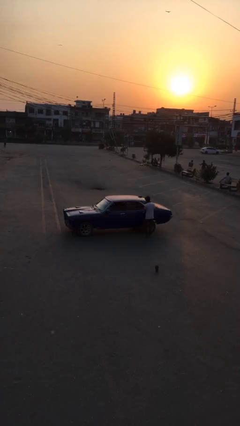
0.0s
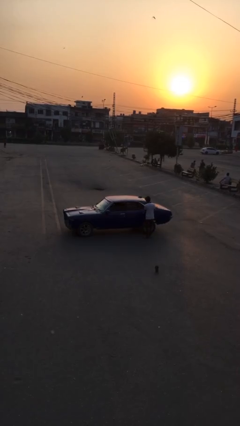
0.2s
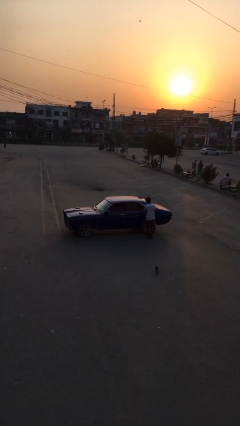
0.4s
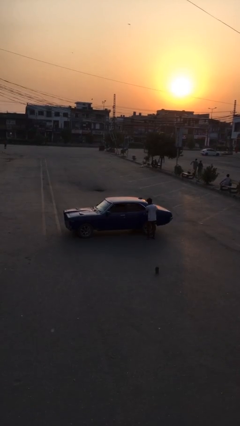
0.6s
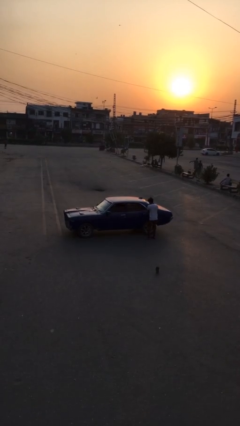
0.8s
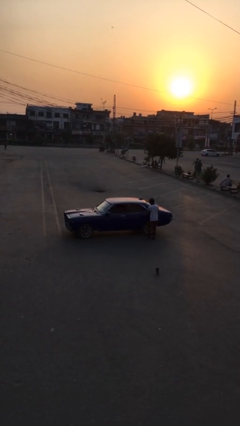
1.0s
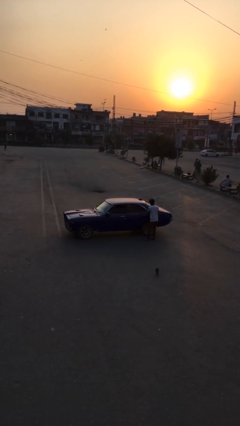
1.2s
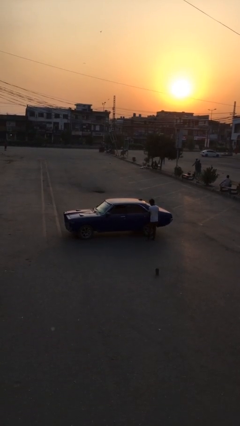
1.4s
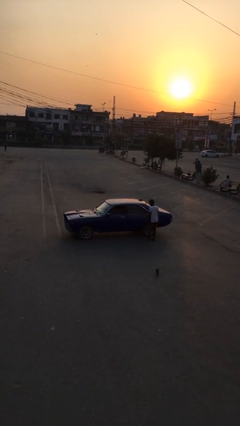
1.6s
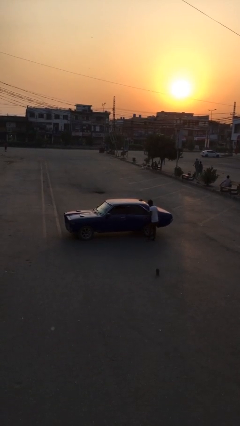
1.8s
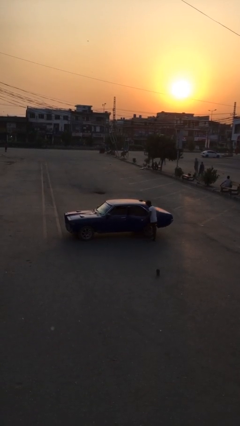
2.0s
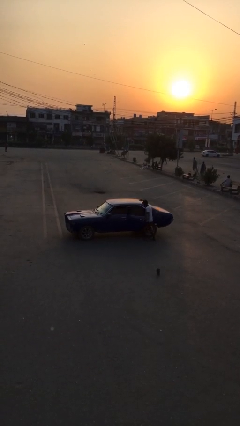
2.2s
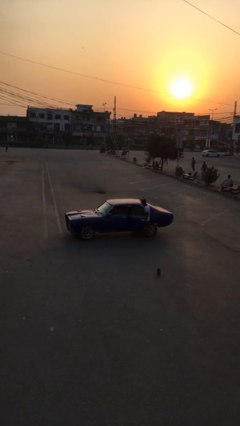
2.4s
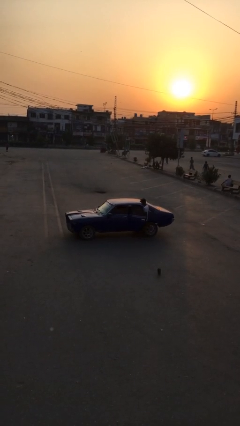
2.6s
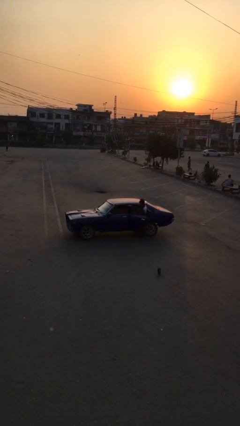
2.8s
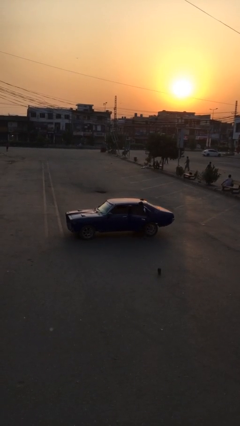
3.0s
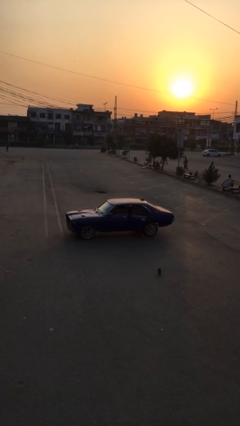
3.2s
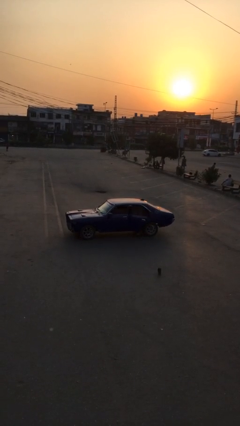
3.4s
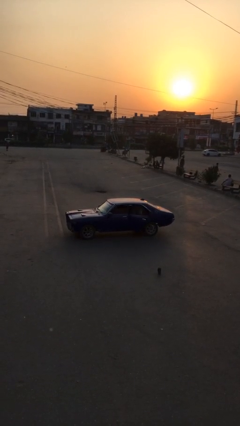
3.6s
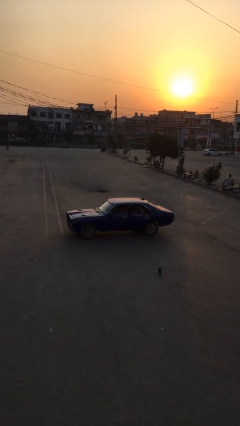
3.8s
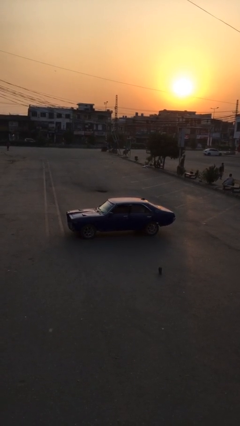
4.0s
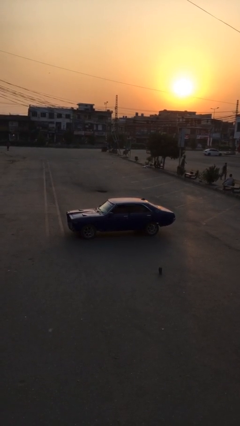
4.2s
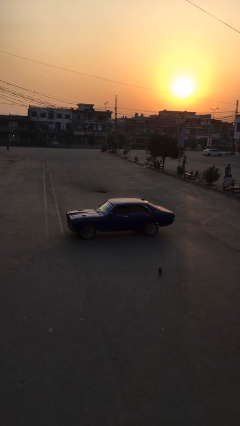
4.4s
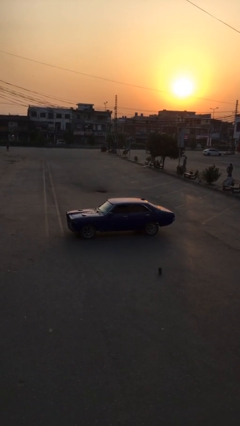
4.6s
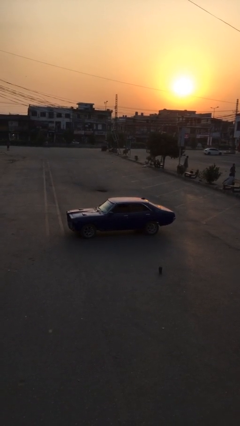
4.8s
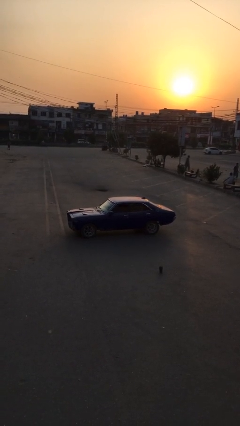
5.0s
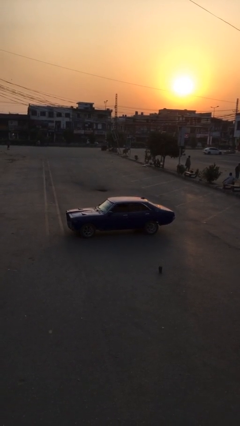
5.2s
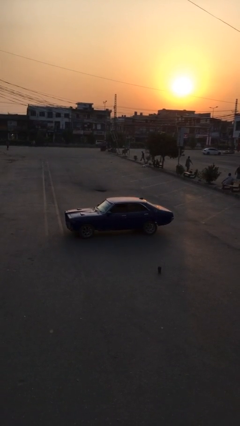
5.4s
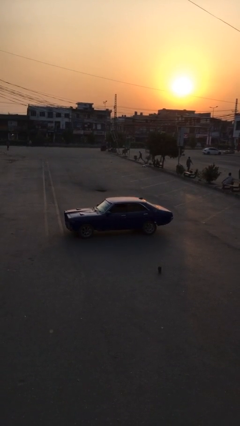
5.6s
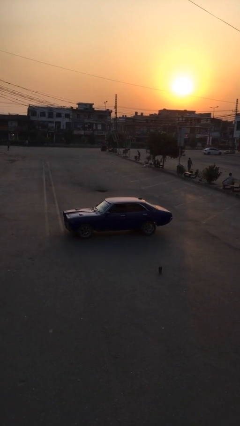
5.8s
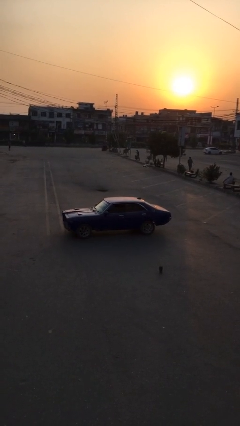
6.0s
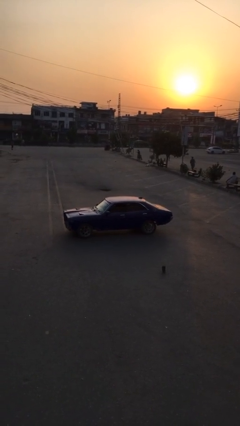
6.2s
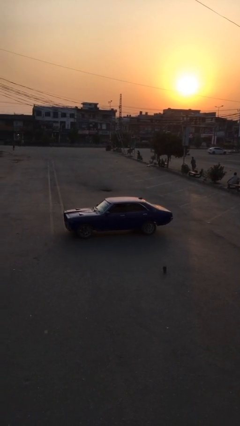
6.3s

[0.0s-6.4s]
car picks up person

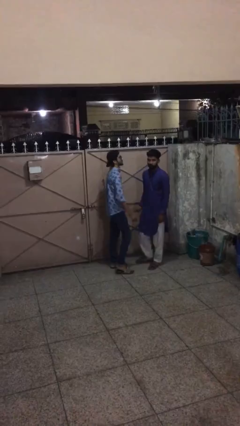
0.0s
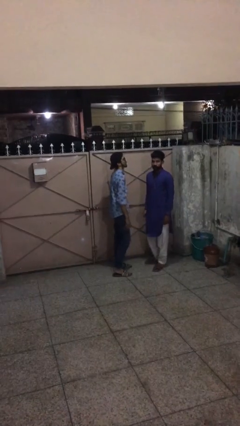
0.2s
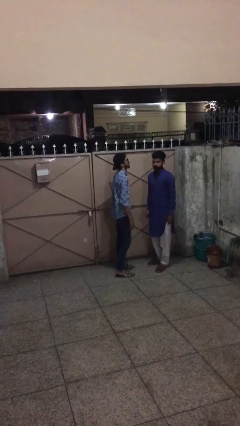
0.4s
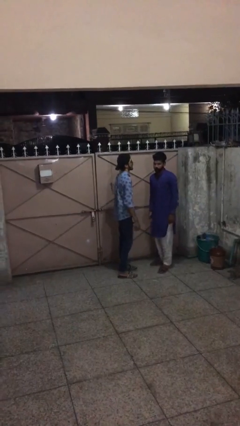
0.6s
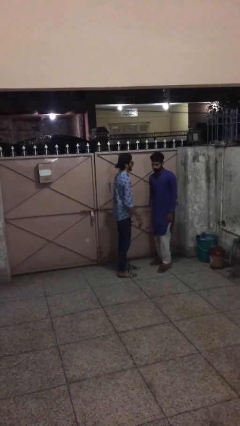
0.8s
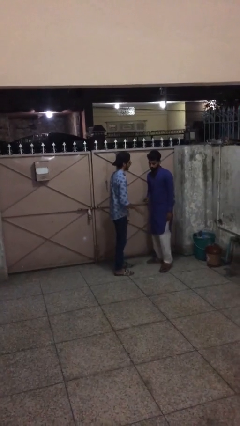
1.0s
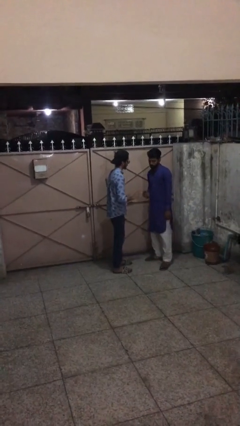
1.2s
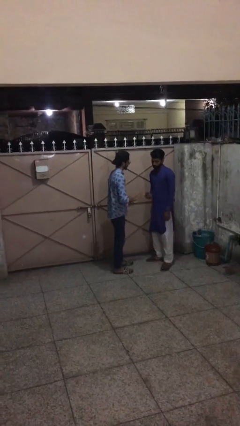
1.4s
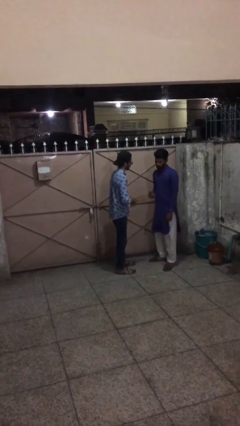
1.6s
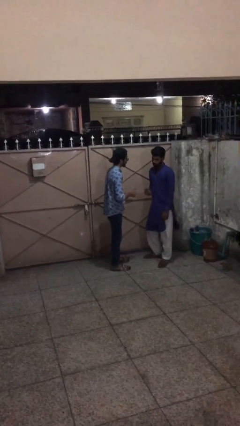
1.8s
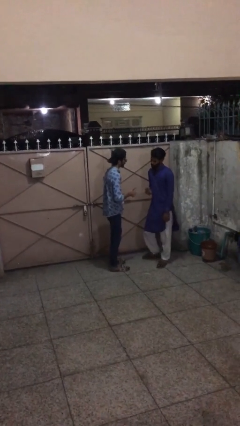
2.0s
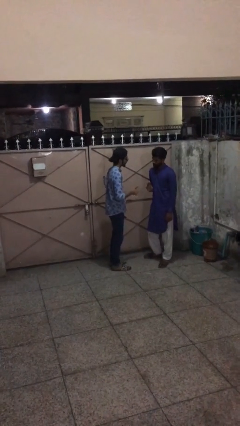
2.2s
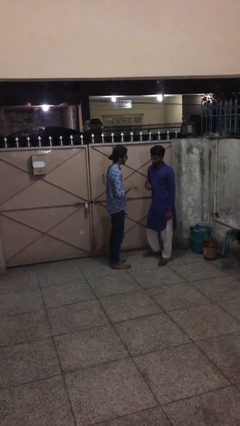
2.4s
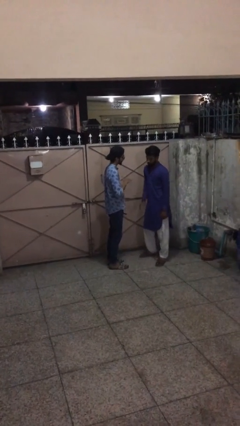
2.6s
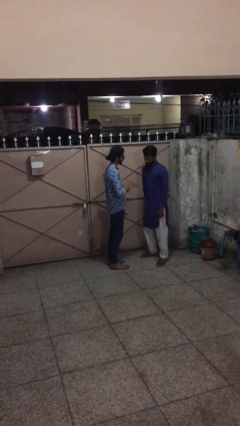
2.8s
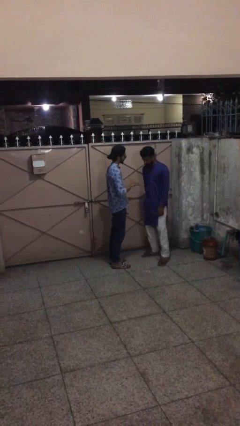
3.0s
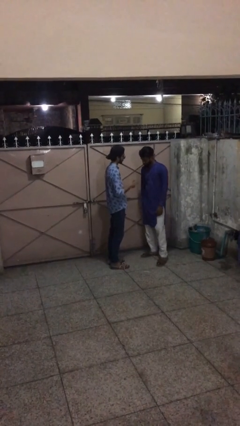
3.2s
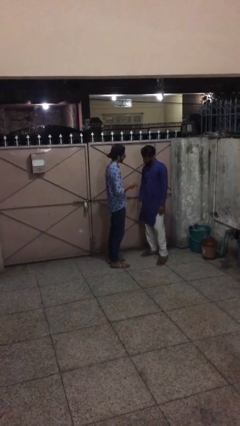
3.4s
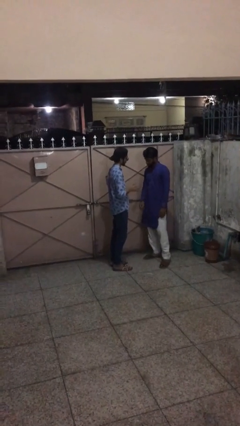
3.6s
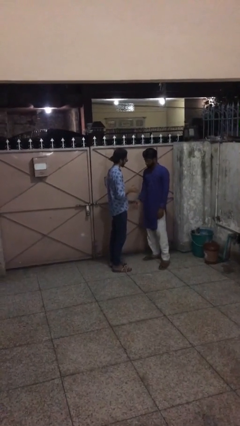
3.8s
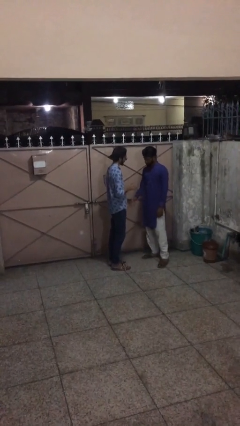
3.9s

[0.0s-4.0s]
person talks to person

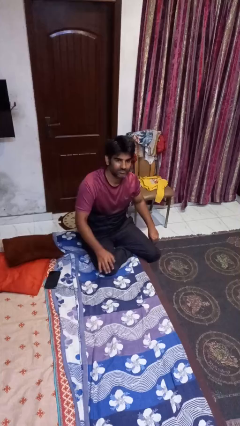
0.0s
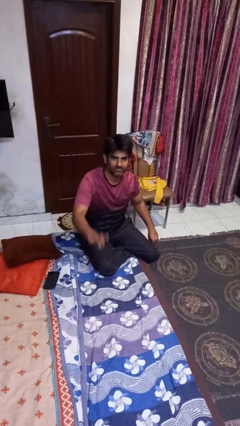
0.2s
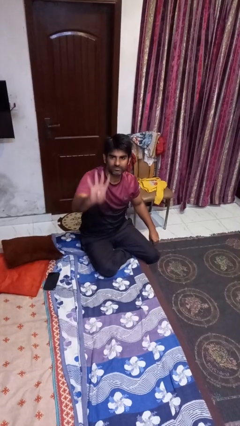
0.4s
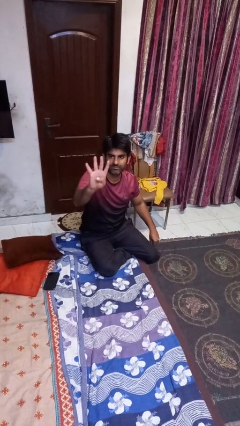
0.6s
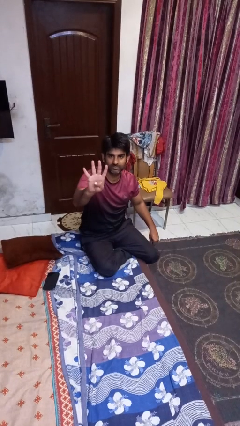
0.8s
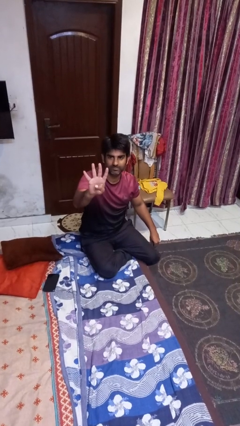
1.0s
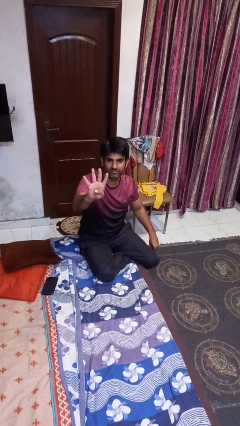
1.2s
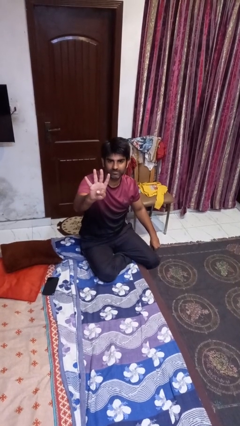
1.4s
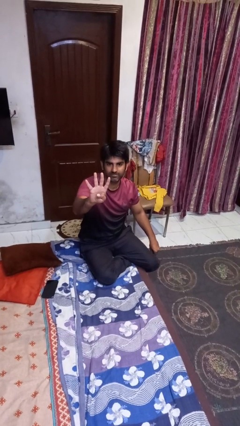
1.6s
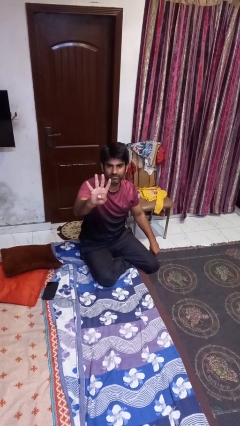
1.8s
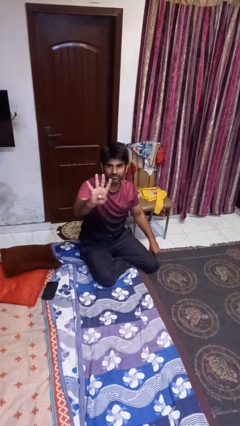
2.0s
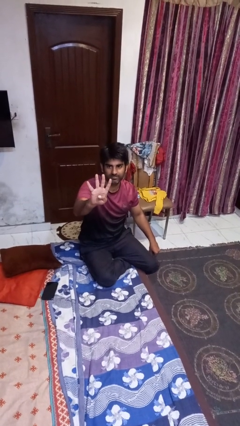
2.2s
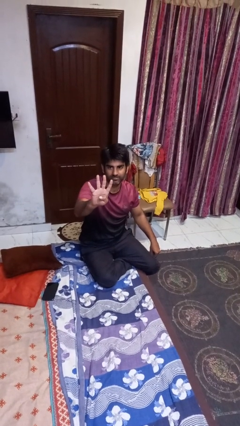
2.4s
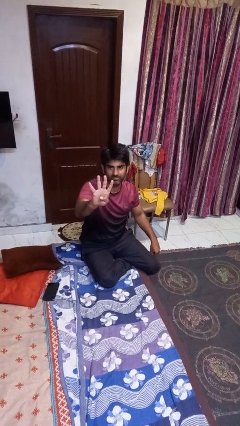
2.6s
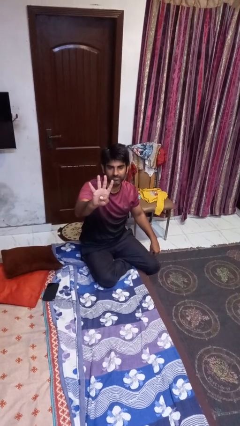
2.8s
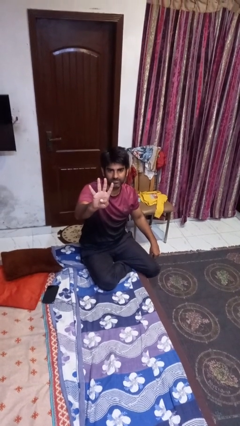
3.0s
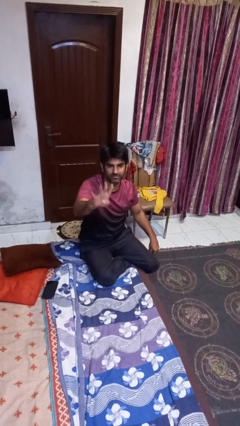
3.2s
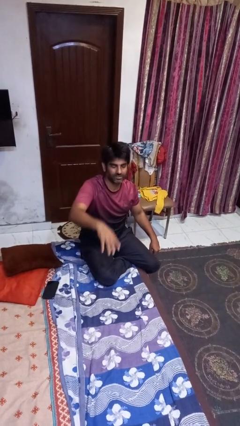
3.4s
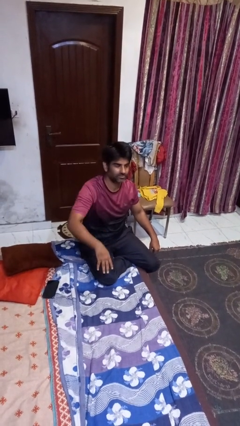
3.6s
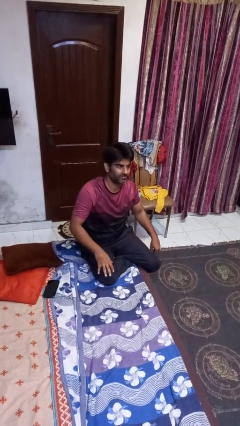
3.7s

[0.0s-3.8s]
person gestures number four

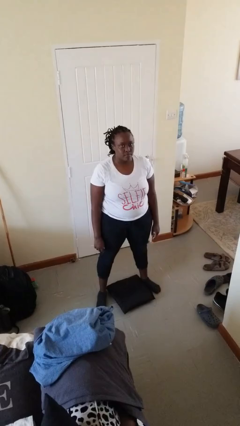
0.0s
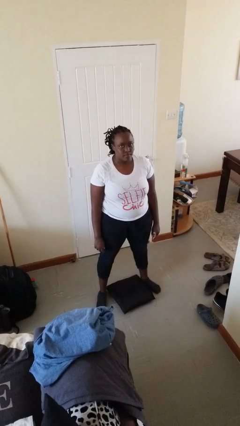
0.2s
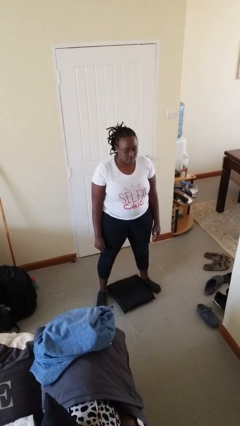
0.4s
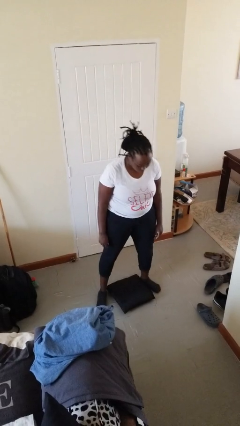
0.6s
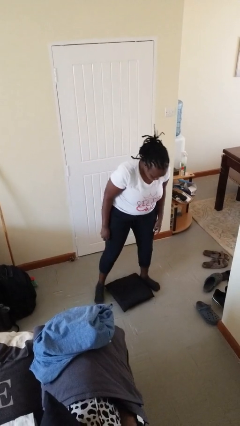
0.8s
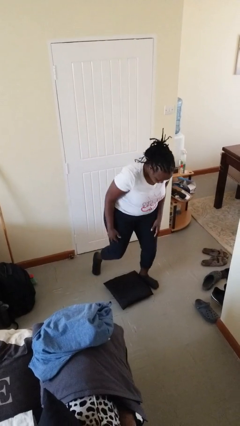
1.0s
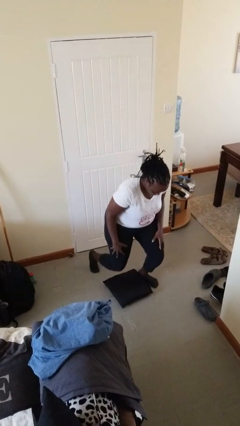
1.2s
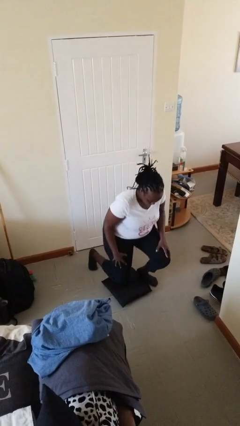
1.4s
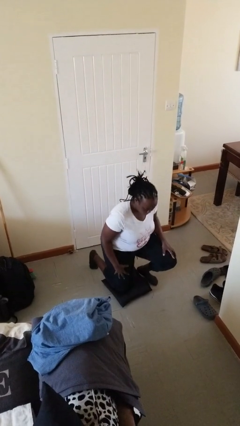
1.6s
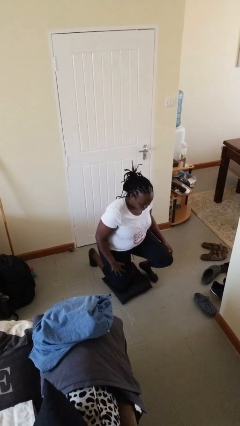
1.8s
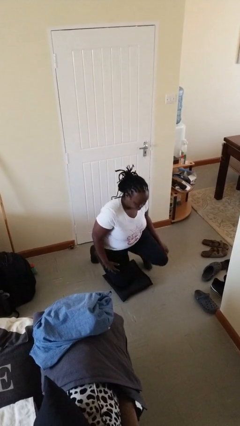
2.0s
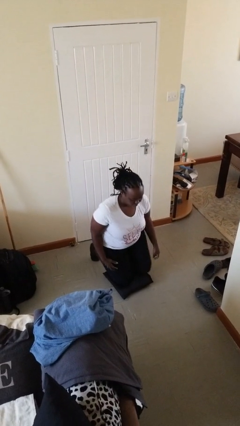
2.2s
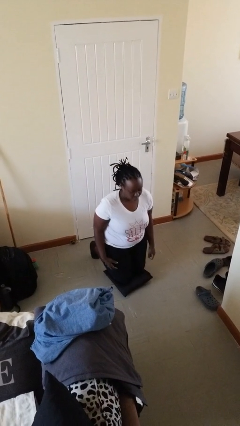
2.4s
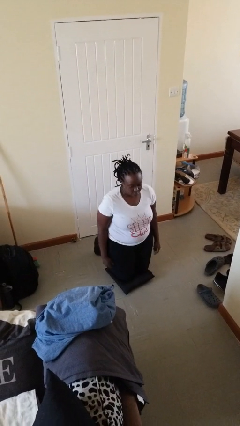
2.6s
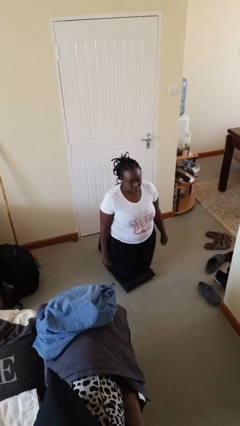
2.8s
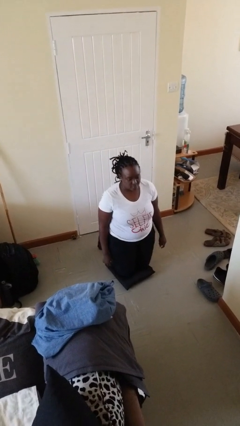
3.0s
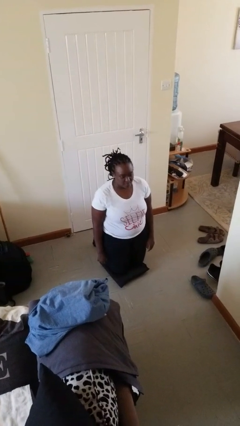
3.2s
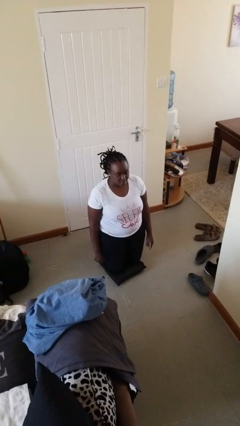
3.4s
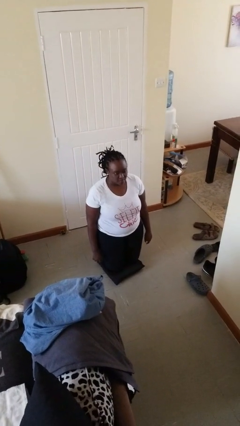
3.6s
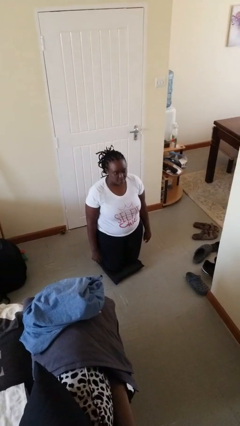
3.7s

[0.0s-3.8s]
person kneels

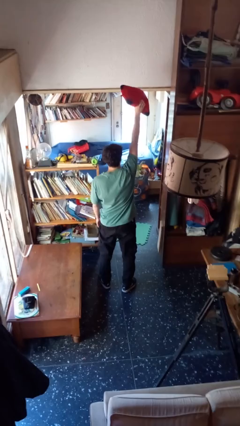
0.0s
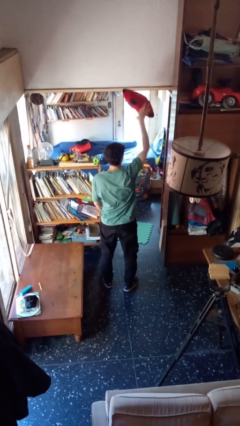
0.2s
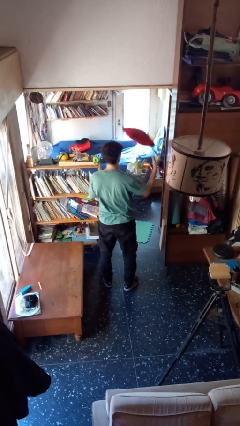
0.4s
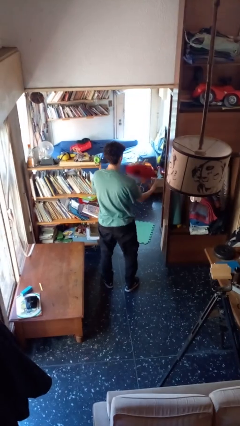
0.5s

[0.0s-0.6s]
person drops object
